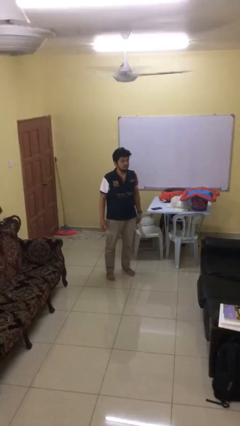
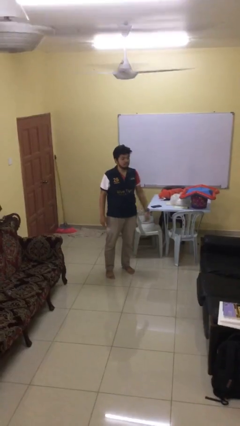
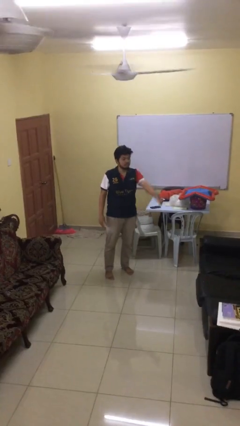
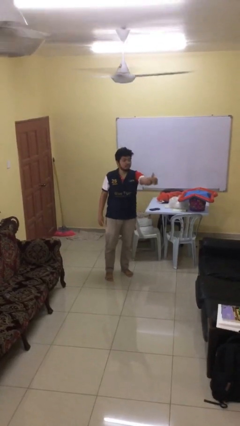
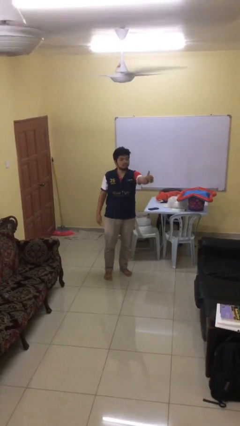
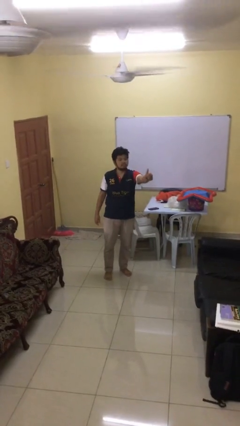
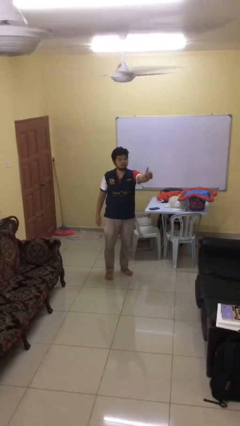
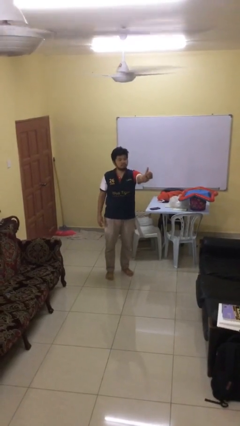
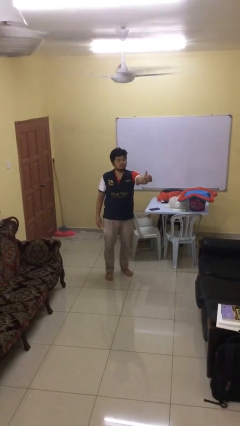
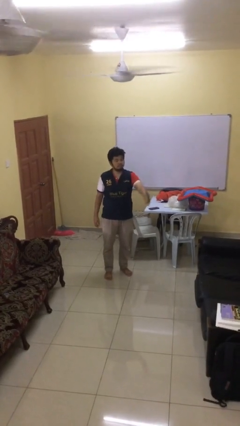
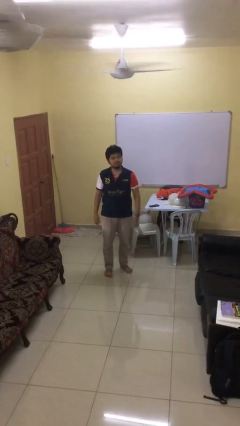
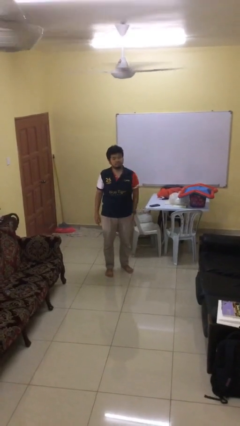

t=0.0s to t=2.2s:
person gestures thumbs up

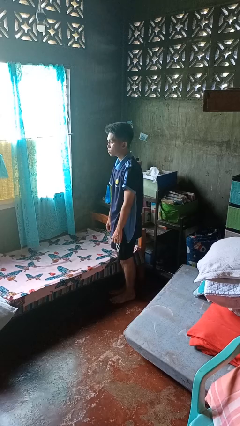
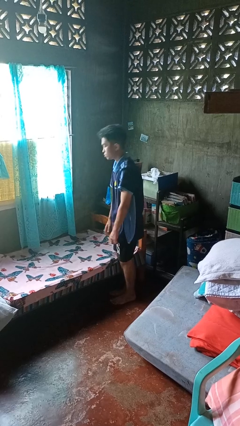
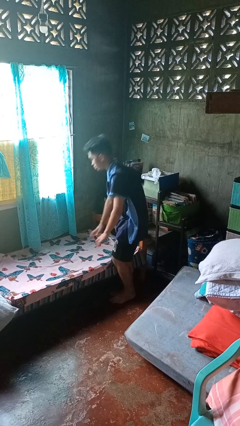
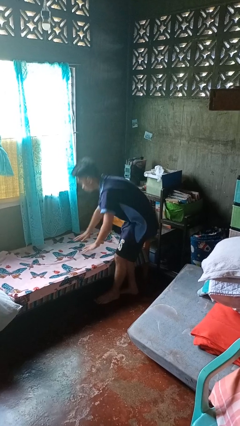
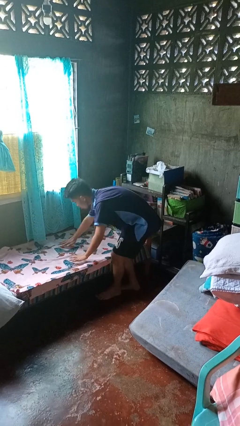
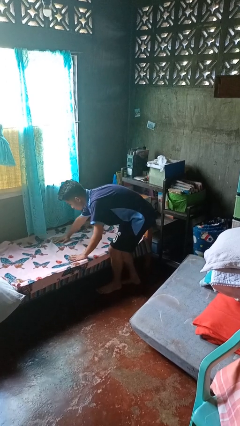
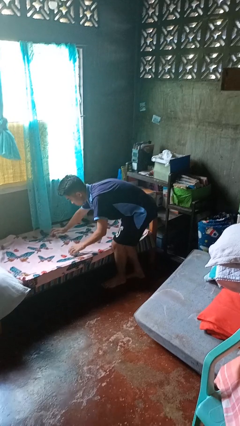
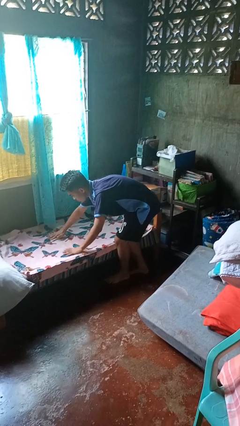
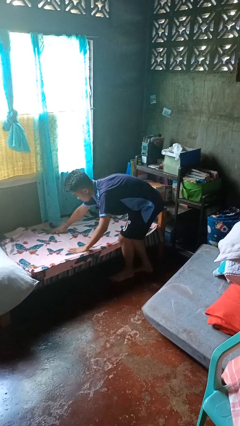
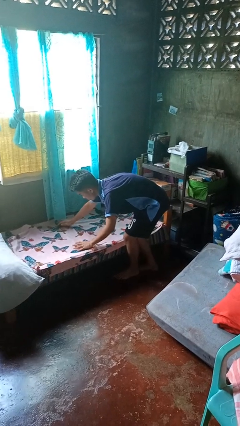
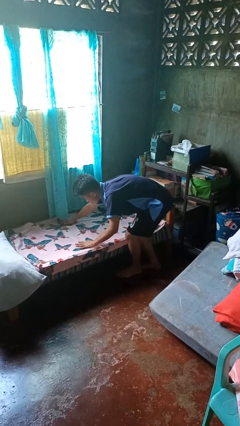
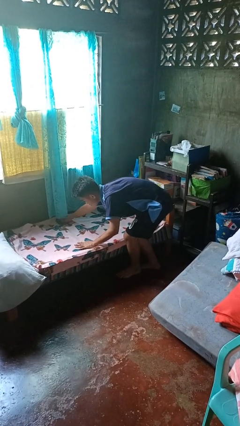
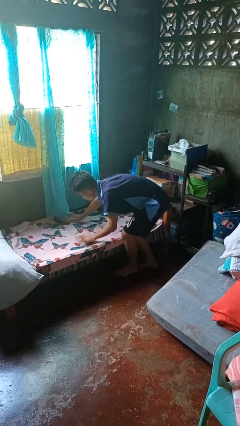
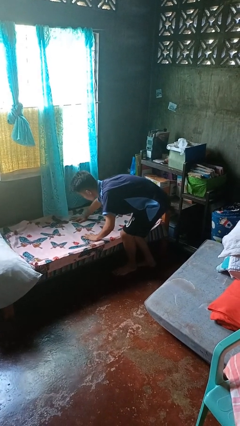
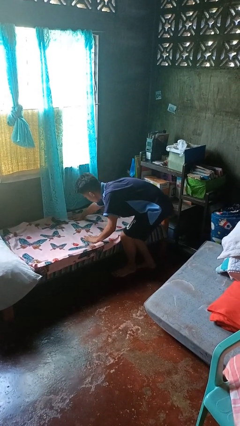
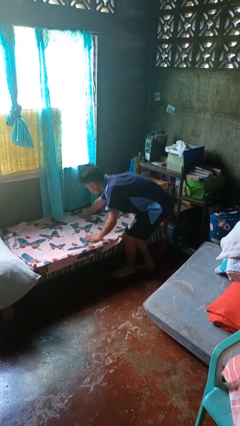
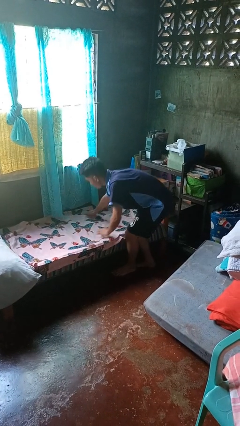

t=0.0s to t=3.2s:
person makes bed

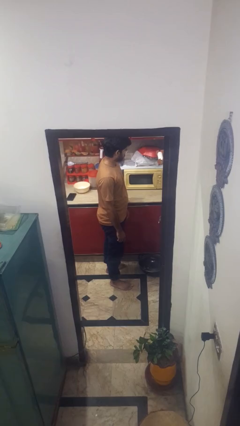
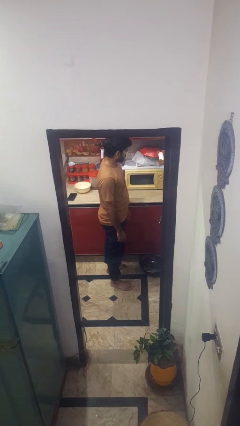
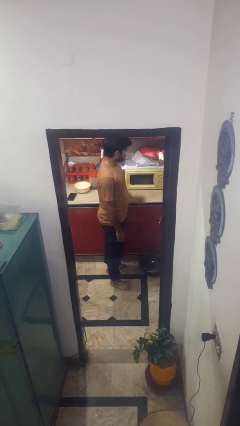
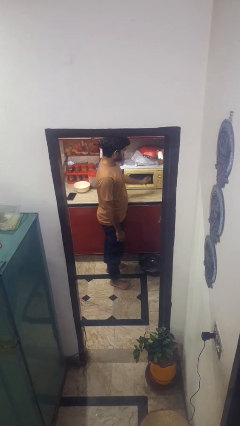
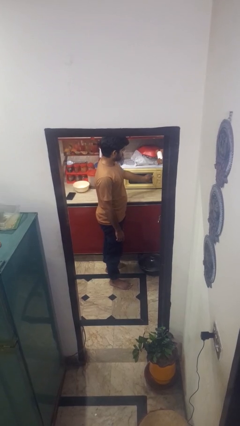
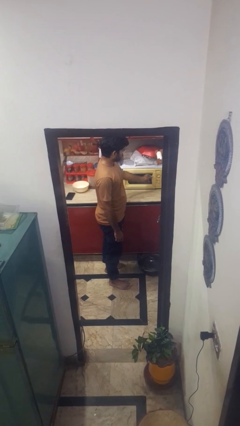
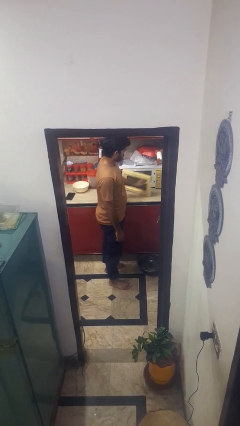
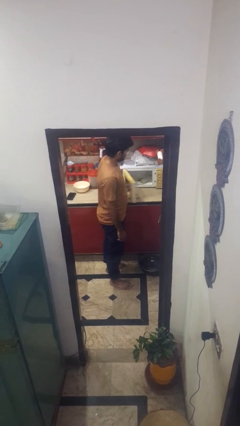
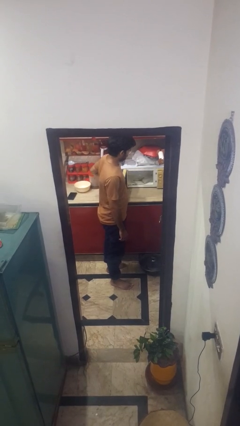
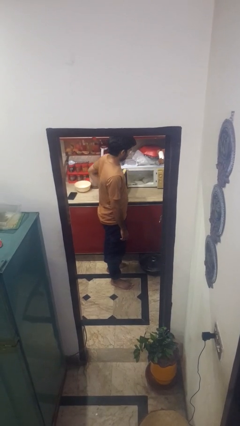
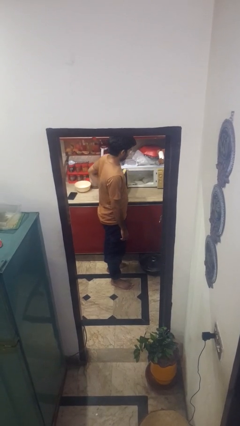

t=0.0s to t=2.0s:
person opens microwave

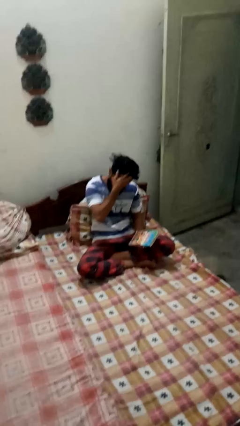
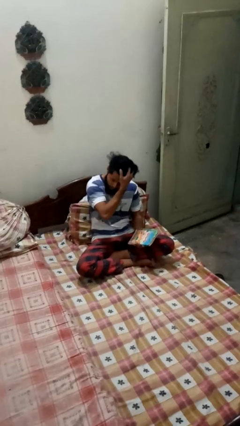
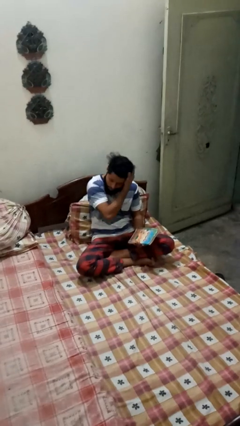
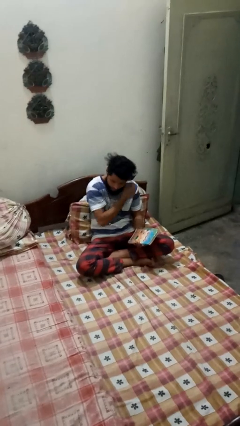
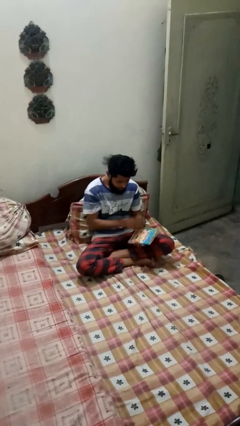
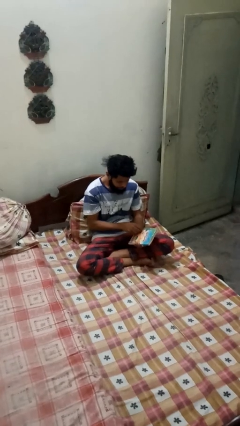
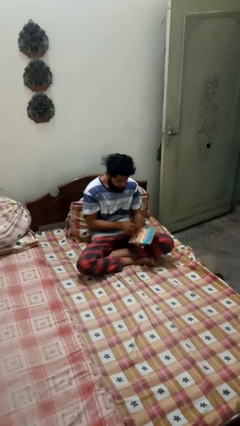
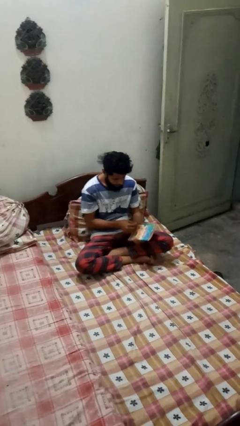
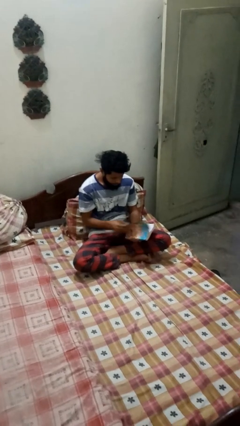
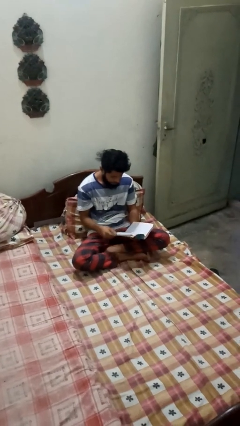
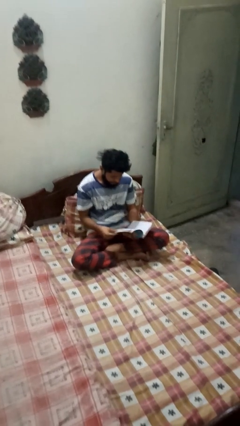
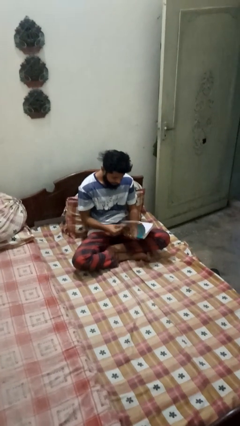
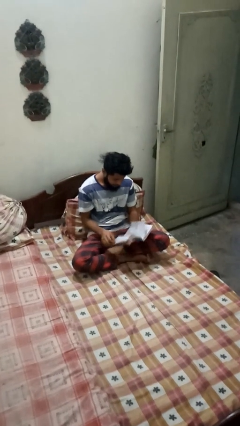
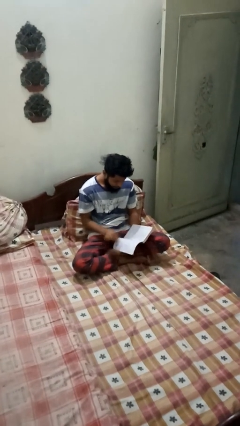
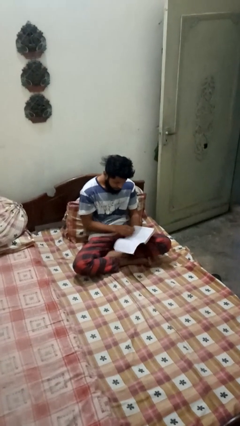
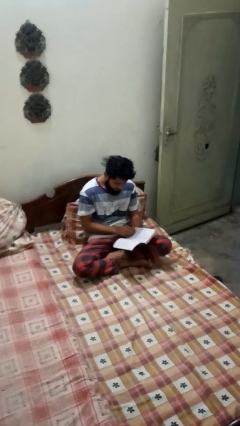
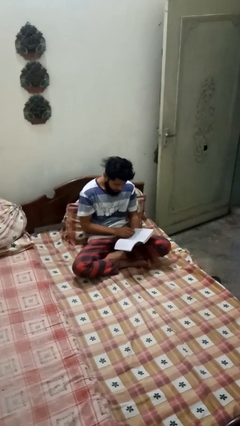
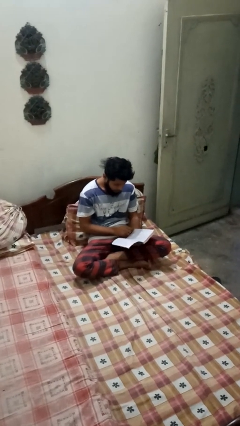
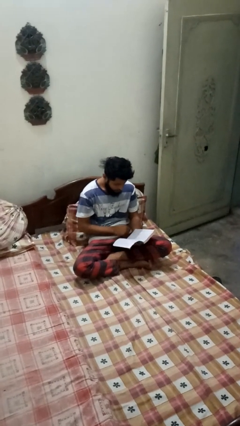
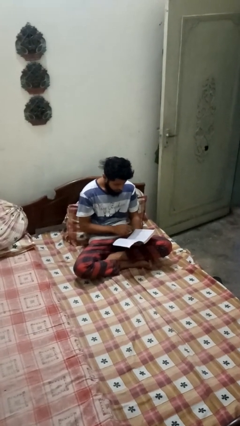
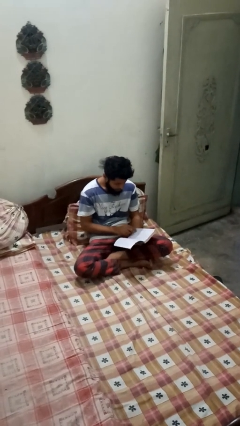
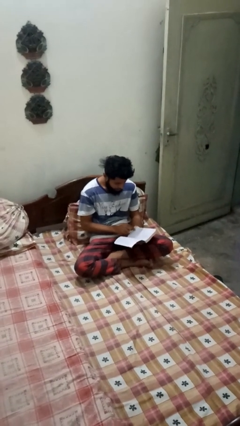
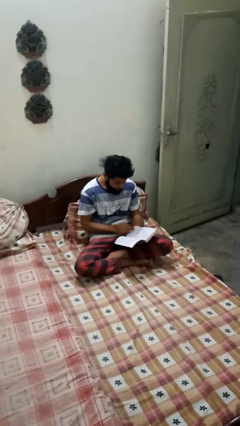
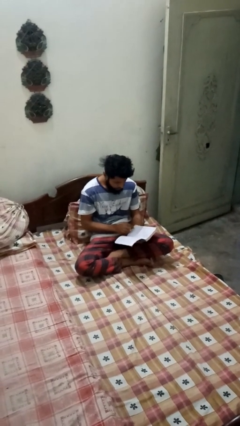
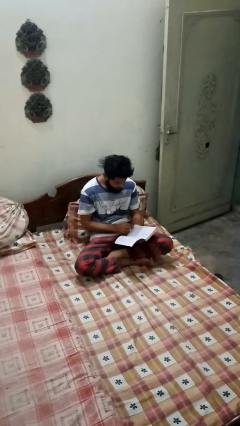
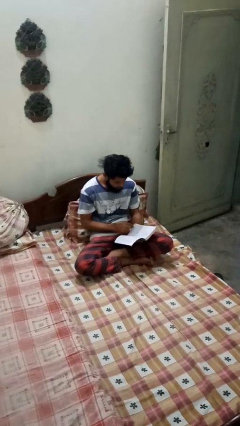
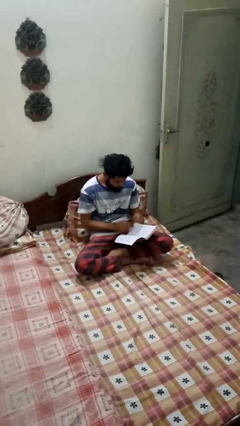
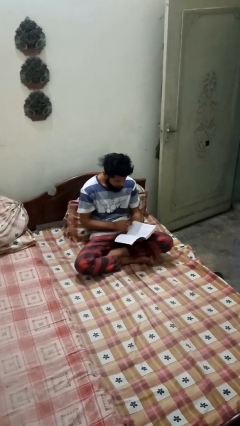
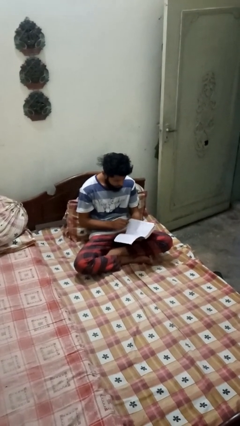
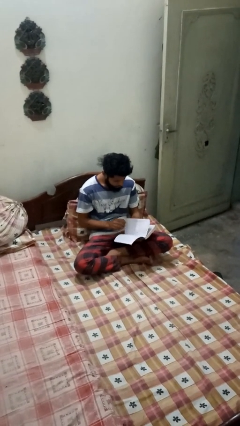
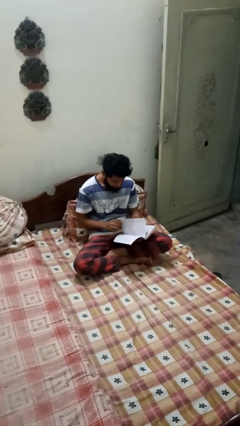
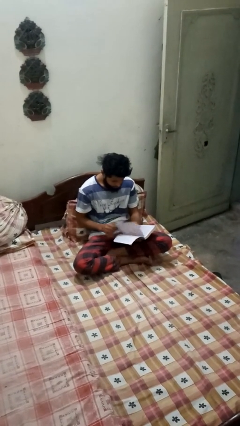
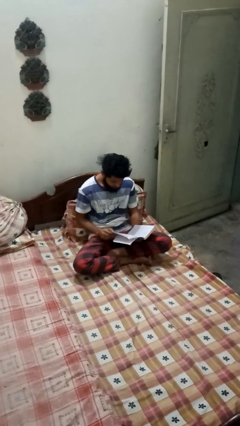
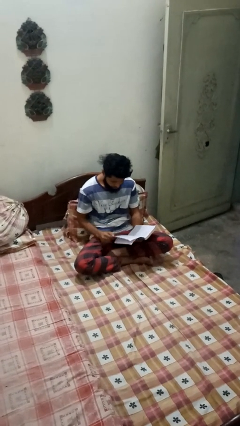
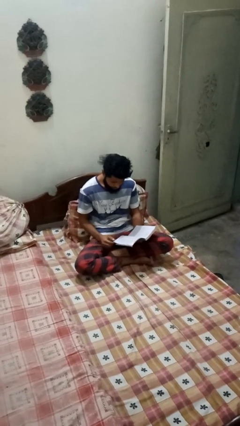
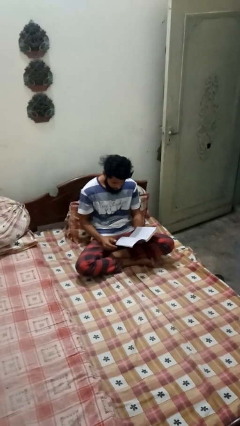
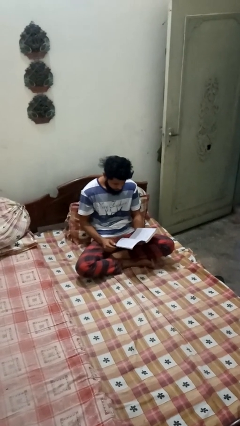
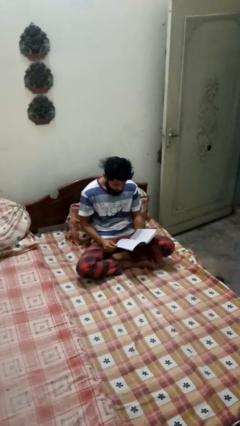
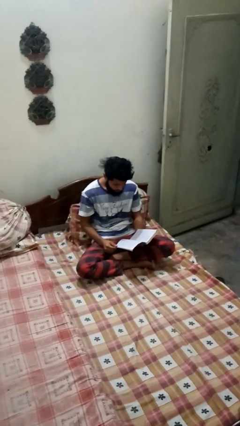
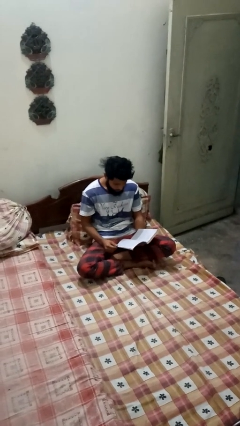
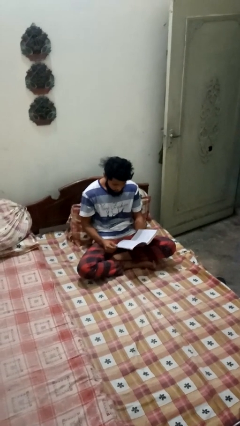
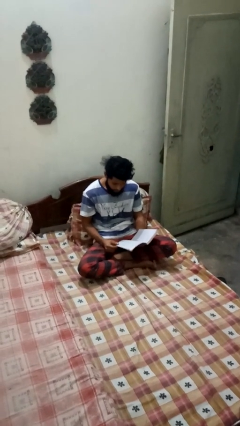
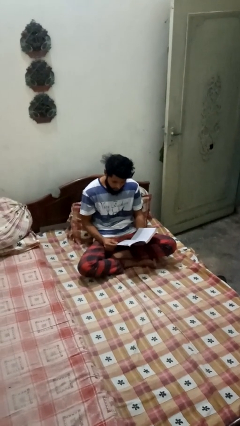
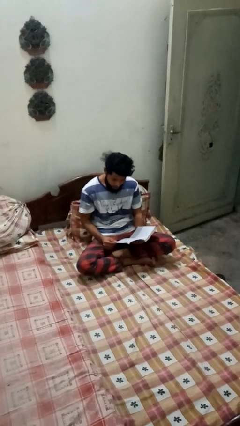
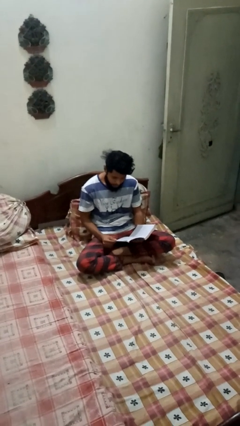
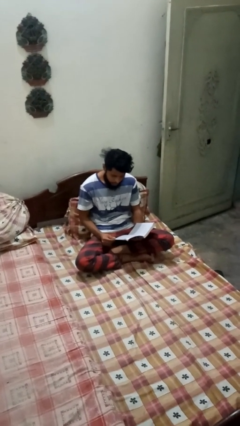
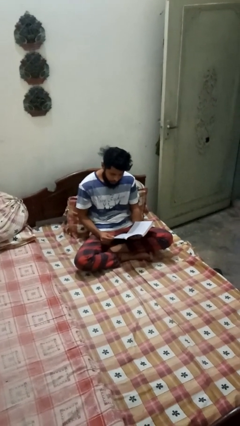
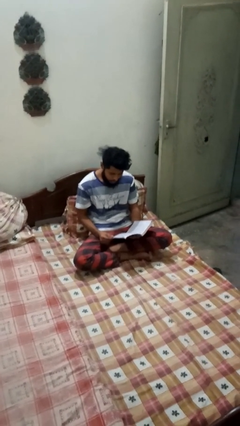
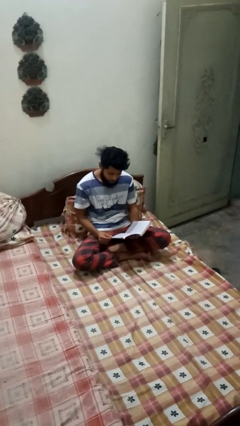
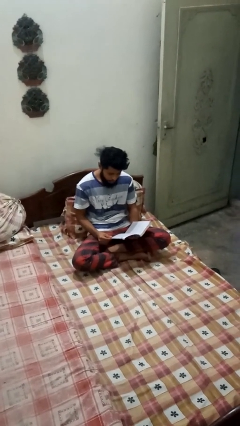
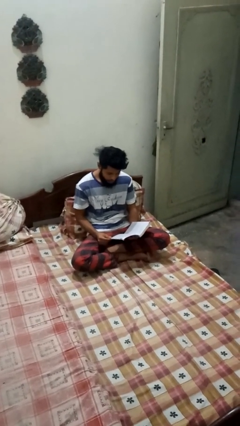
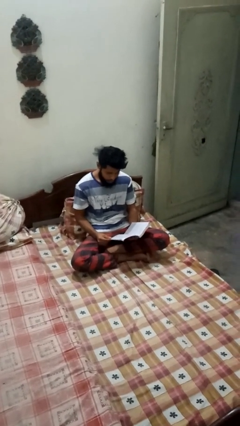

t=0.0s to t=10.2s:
person reads book
